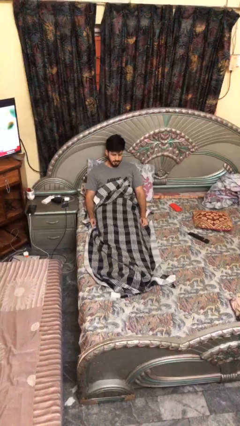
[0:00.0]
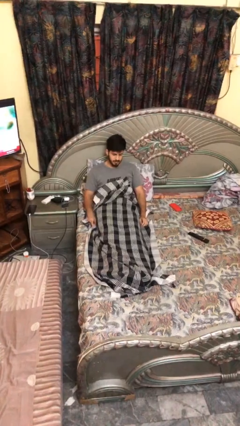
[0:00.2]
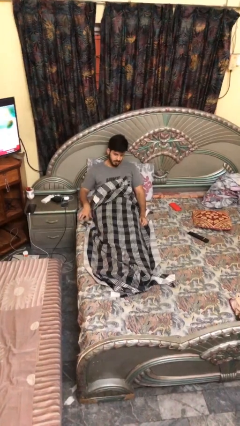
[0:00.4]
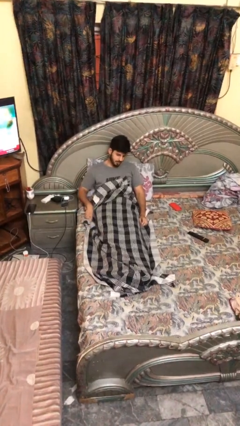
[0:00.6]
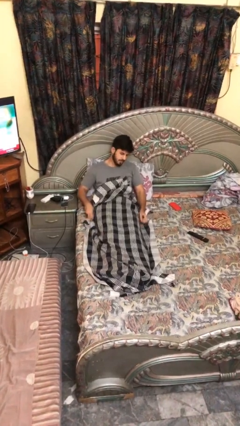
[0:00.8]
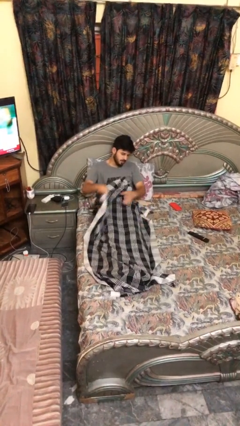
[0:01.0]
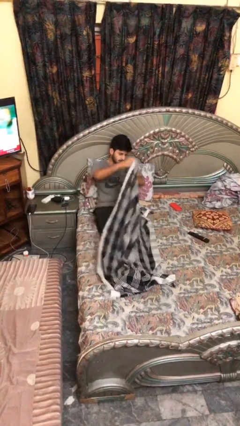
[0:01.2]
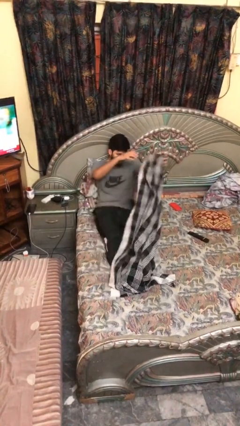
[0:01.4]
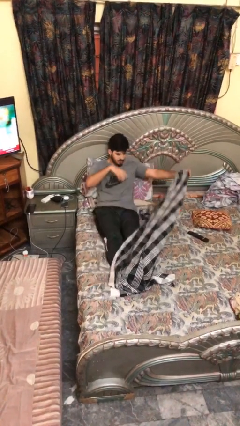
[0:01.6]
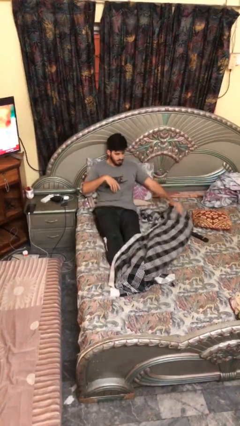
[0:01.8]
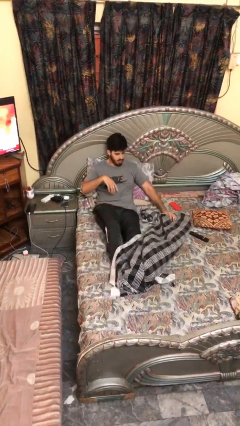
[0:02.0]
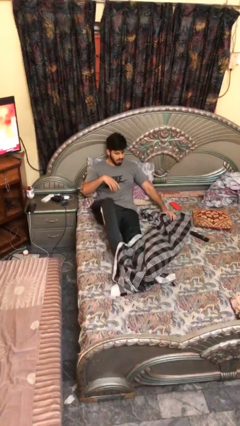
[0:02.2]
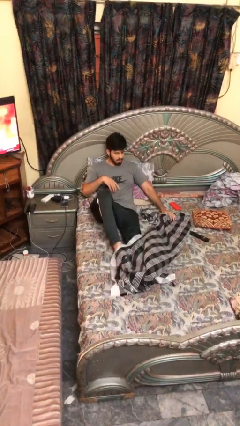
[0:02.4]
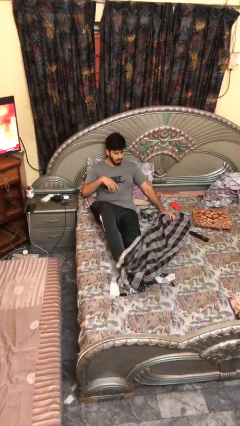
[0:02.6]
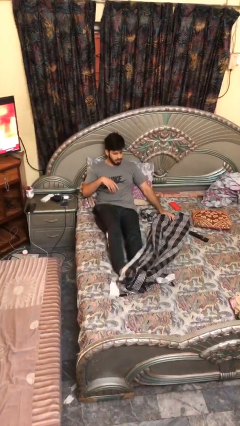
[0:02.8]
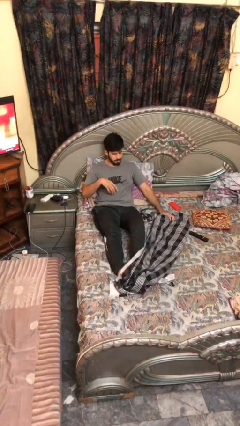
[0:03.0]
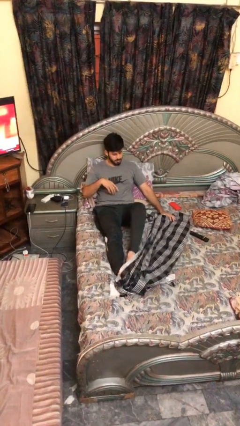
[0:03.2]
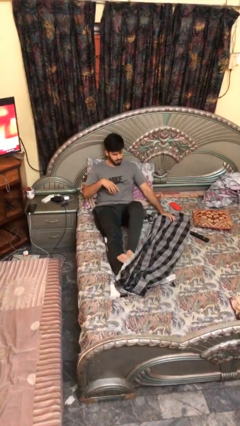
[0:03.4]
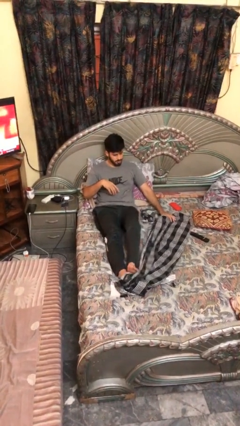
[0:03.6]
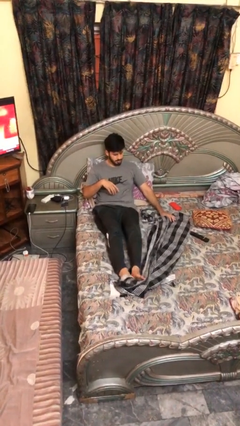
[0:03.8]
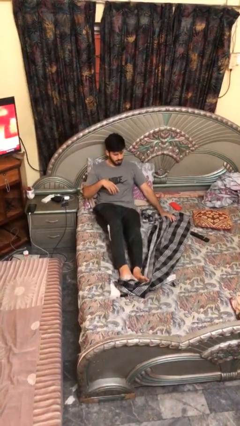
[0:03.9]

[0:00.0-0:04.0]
person uncovers with bedsheets

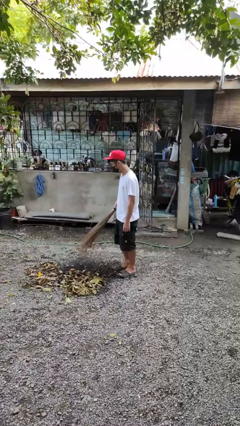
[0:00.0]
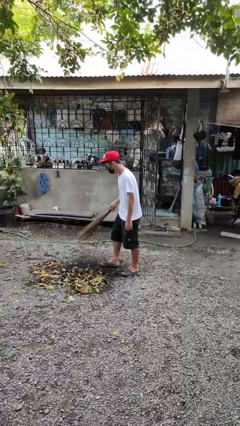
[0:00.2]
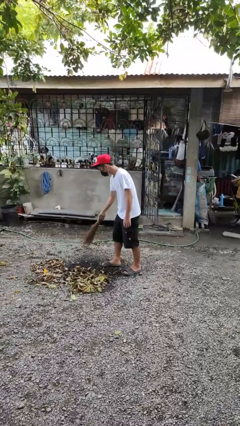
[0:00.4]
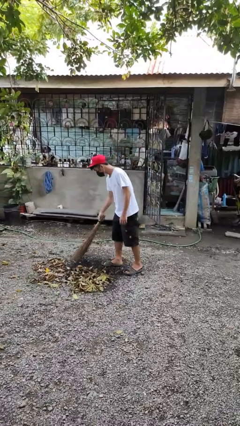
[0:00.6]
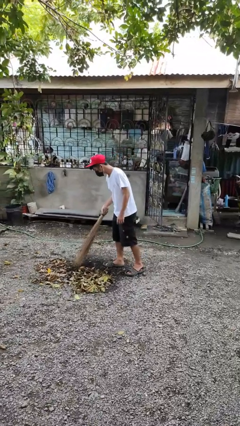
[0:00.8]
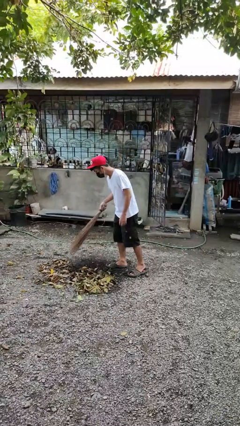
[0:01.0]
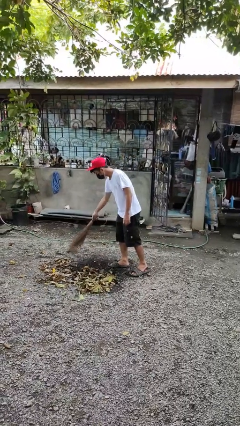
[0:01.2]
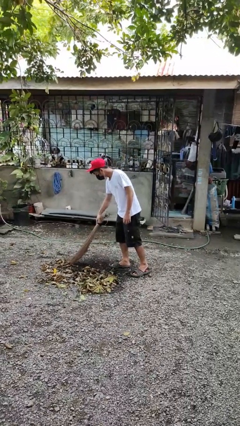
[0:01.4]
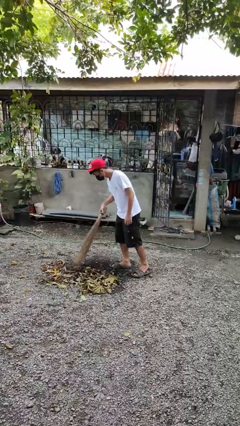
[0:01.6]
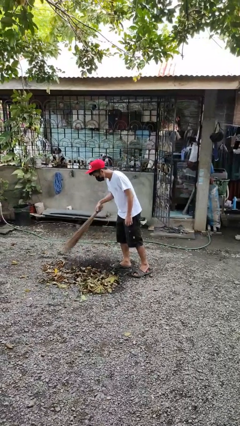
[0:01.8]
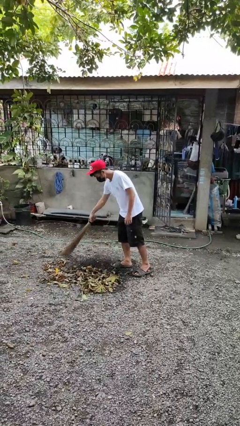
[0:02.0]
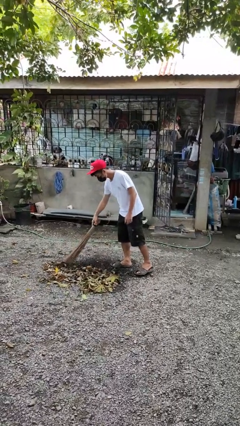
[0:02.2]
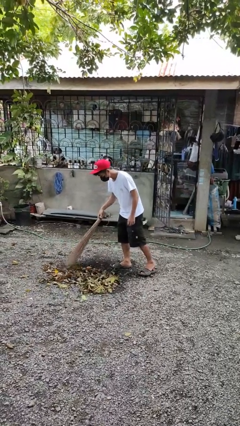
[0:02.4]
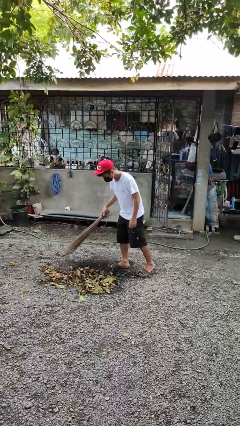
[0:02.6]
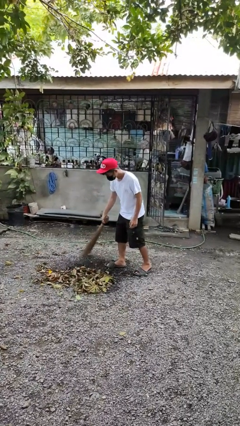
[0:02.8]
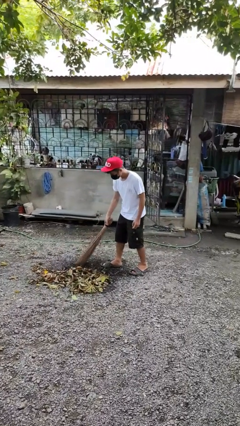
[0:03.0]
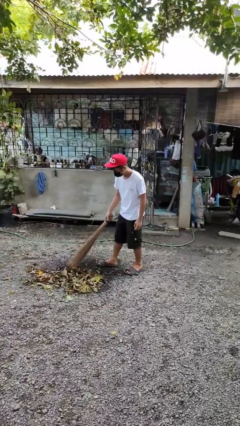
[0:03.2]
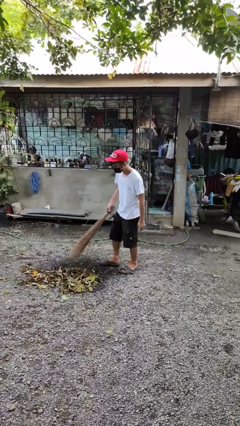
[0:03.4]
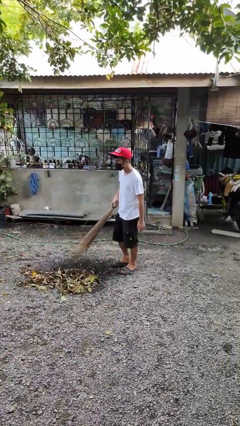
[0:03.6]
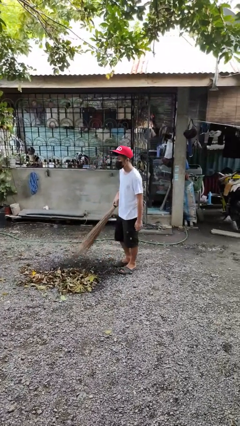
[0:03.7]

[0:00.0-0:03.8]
person sweeps floor

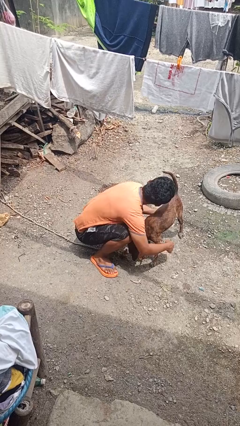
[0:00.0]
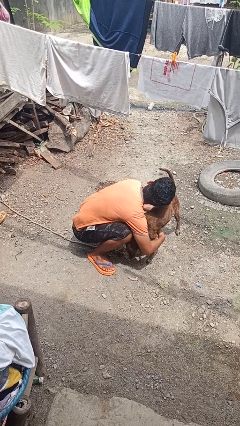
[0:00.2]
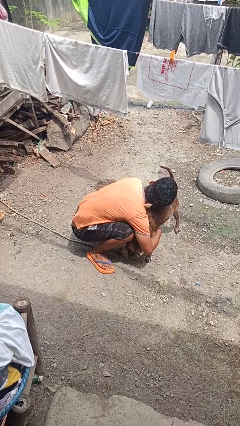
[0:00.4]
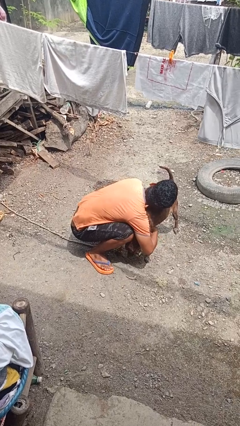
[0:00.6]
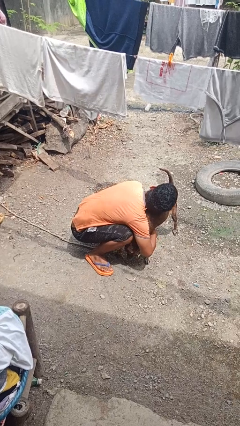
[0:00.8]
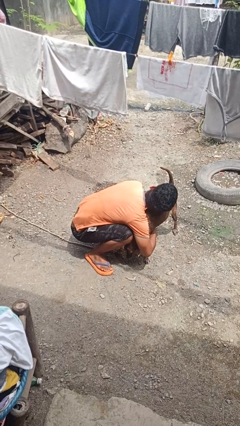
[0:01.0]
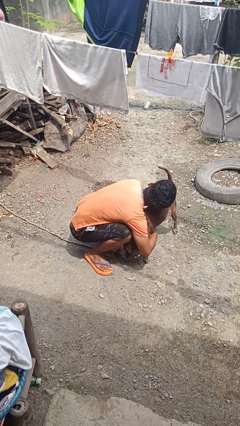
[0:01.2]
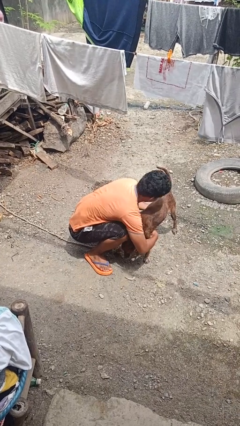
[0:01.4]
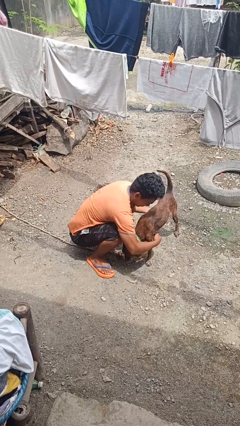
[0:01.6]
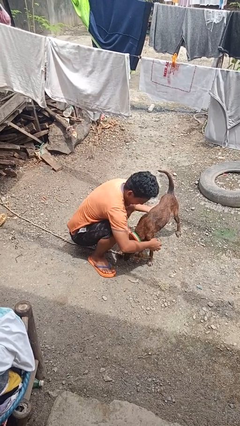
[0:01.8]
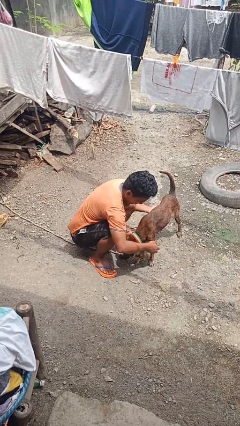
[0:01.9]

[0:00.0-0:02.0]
person hugs dog

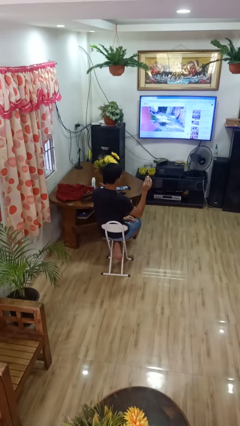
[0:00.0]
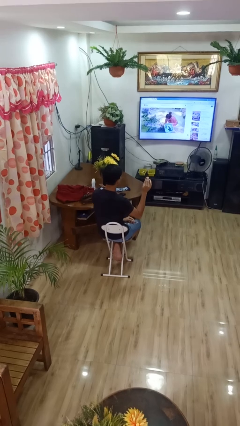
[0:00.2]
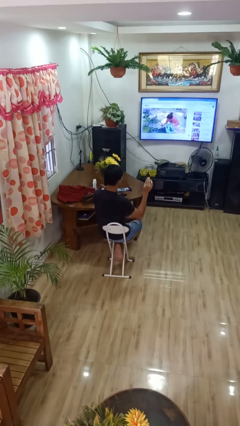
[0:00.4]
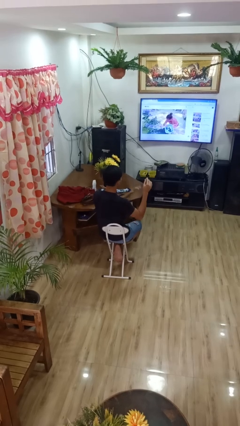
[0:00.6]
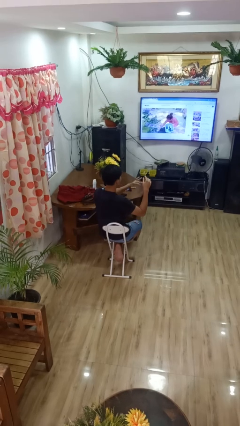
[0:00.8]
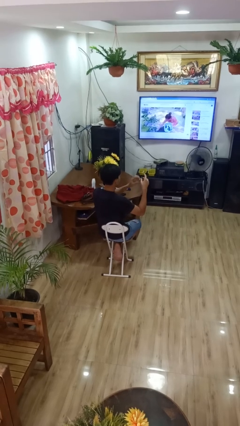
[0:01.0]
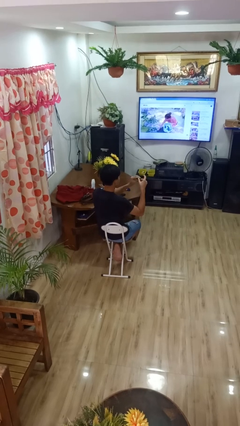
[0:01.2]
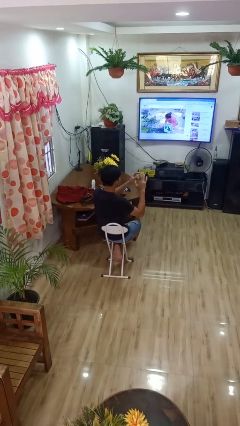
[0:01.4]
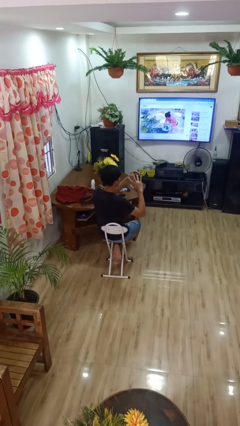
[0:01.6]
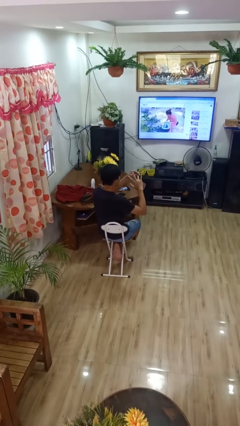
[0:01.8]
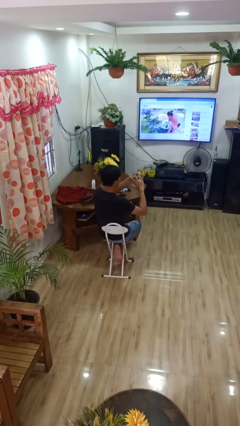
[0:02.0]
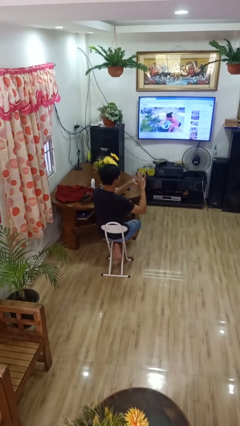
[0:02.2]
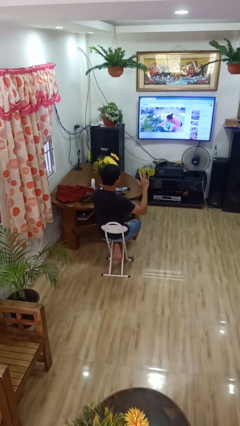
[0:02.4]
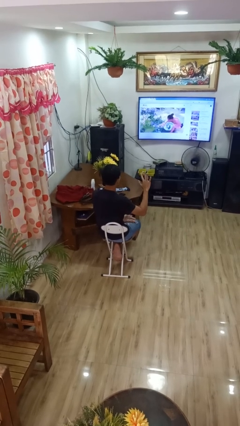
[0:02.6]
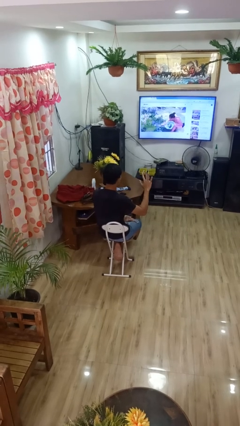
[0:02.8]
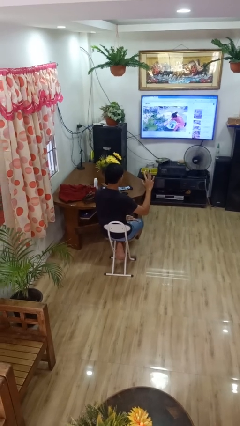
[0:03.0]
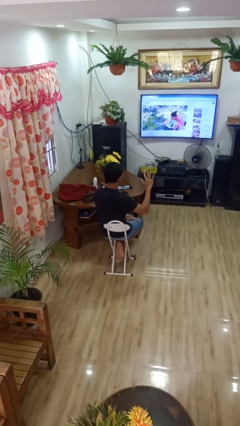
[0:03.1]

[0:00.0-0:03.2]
person puts on ring

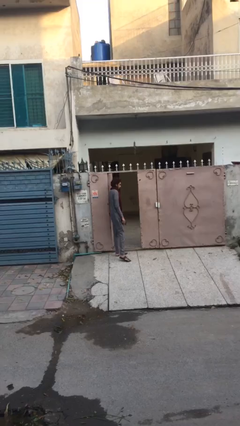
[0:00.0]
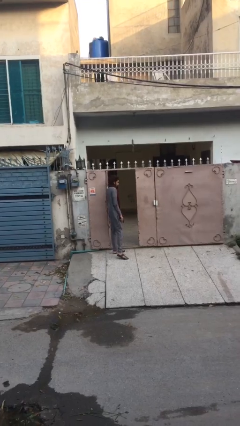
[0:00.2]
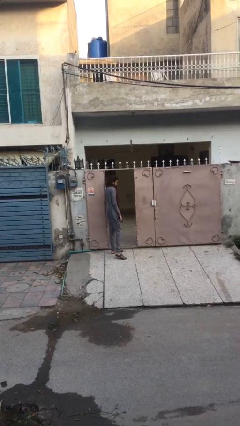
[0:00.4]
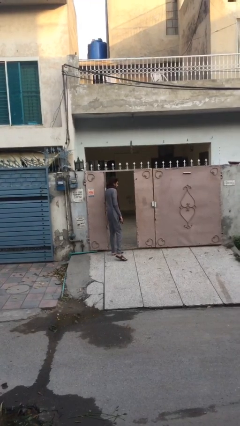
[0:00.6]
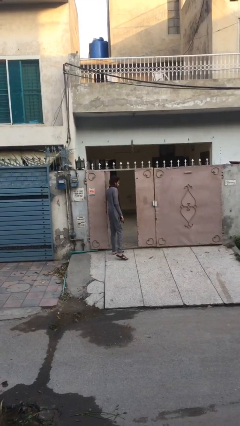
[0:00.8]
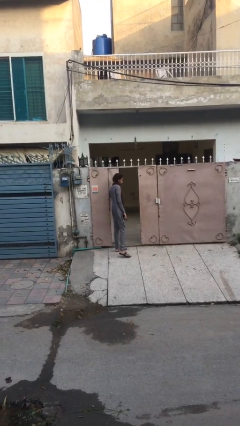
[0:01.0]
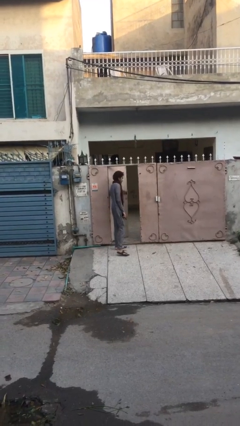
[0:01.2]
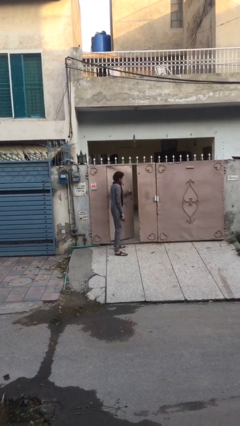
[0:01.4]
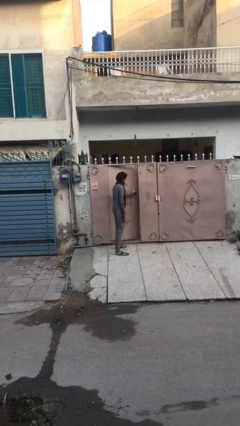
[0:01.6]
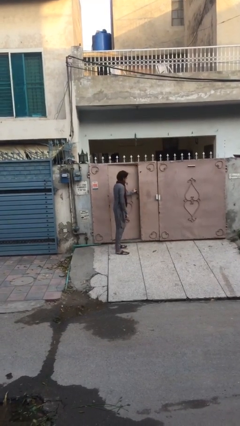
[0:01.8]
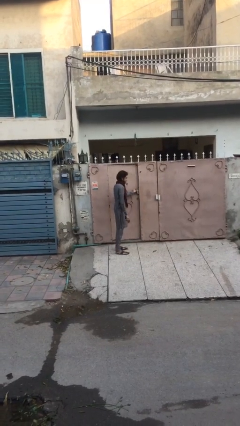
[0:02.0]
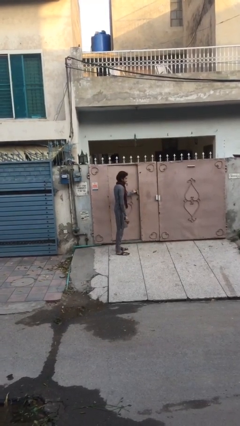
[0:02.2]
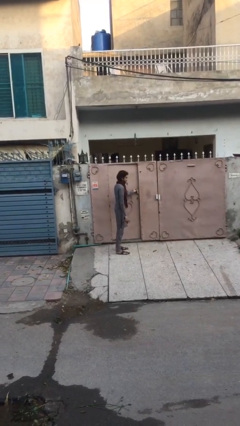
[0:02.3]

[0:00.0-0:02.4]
person closes facility door

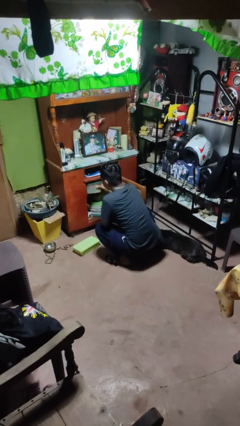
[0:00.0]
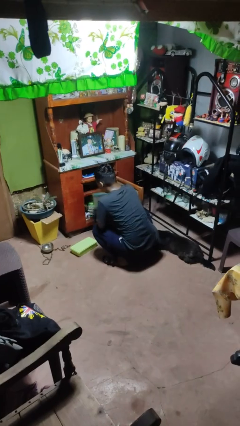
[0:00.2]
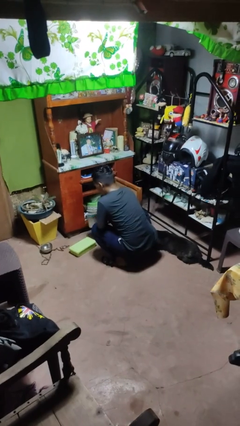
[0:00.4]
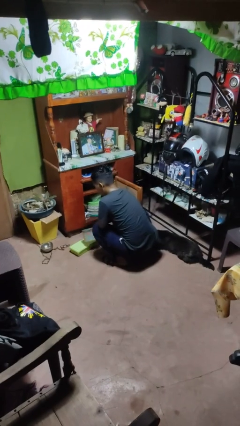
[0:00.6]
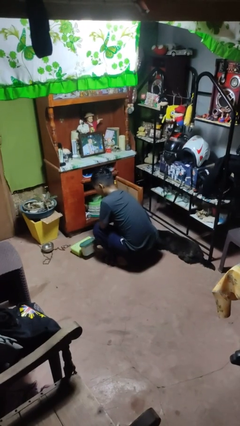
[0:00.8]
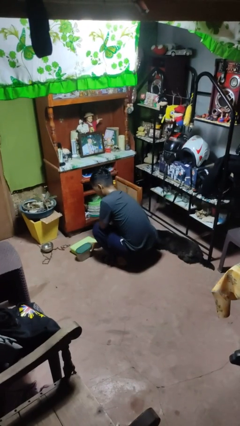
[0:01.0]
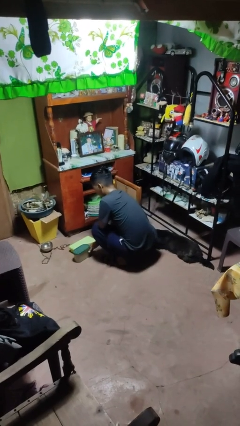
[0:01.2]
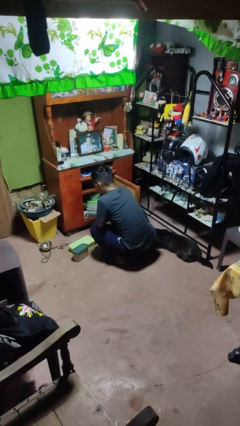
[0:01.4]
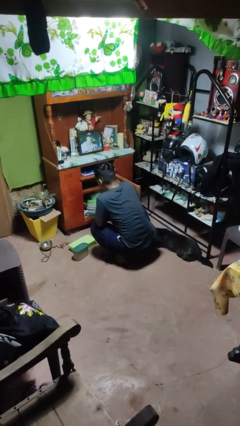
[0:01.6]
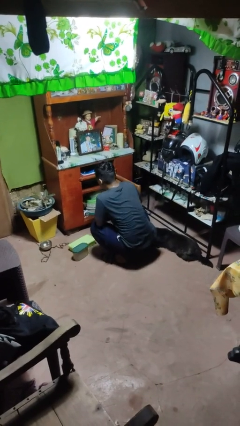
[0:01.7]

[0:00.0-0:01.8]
person takes object from cabinet

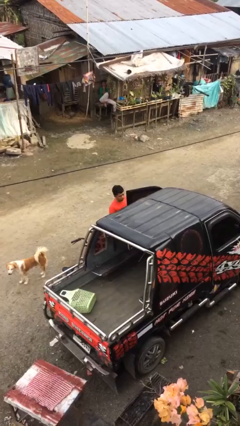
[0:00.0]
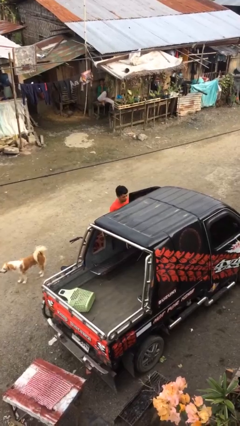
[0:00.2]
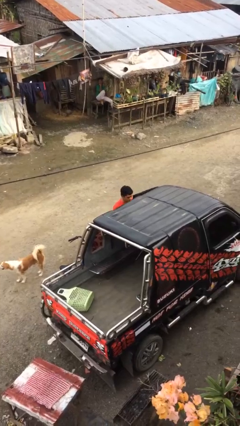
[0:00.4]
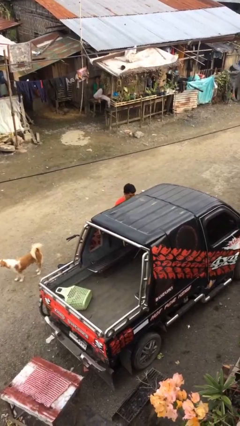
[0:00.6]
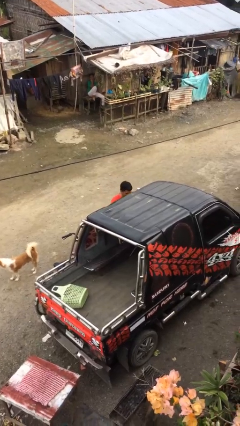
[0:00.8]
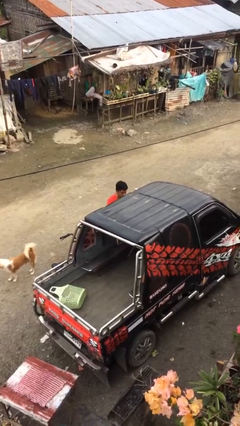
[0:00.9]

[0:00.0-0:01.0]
person closes car door
